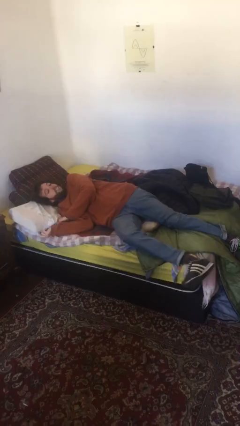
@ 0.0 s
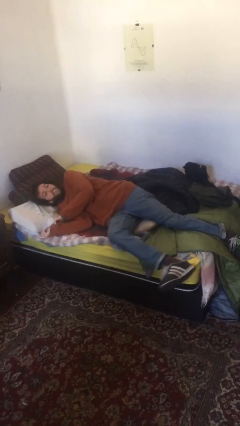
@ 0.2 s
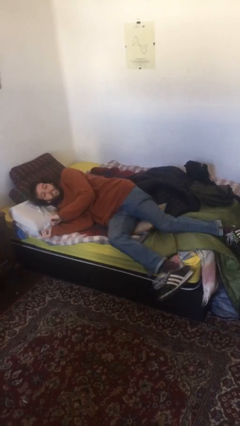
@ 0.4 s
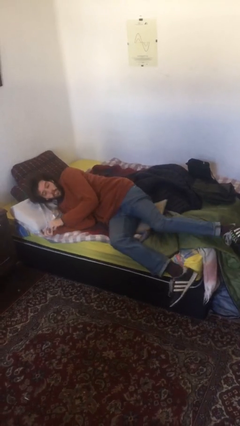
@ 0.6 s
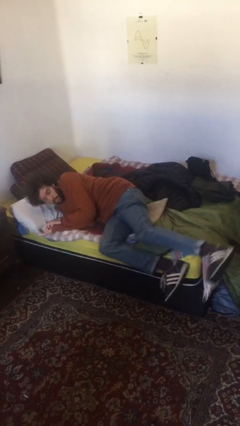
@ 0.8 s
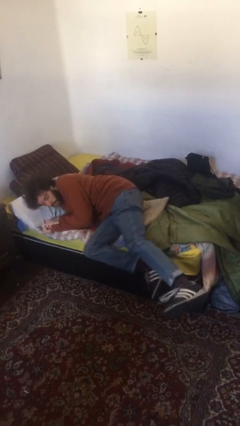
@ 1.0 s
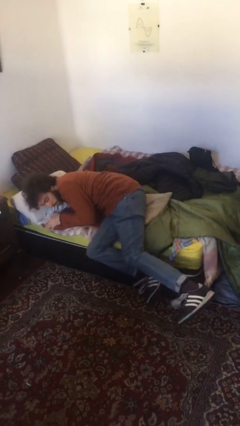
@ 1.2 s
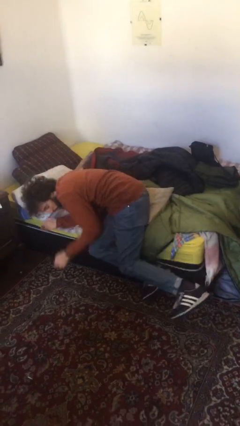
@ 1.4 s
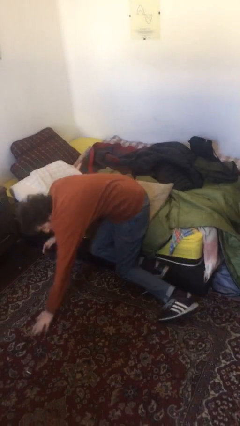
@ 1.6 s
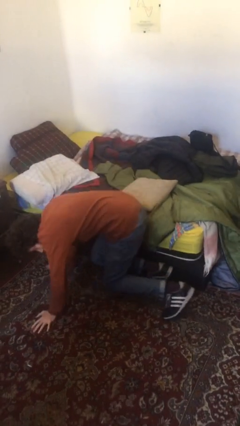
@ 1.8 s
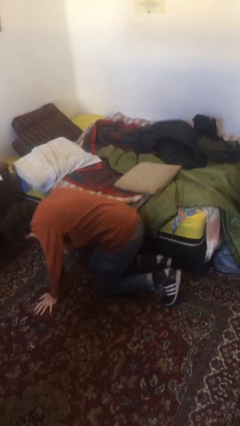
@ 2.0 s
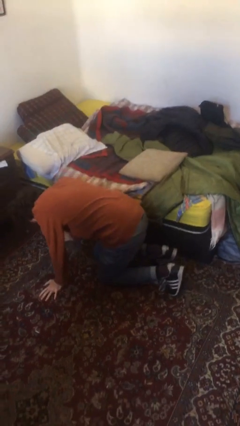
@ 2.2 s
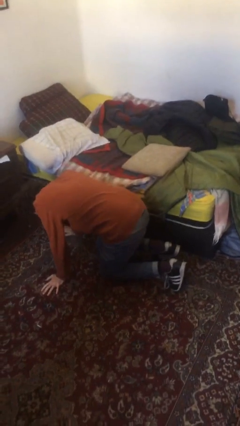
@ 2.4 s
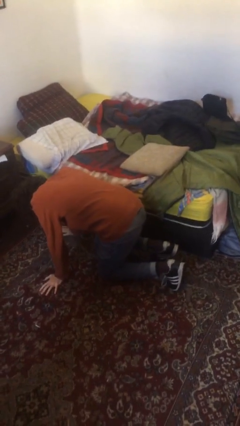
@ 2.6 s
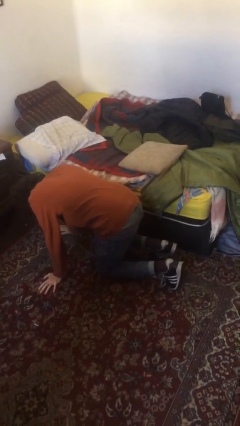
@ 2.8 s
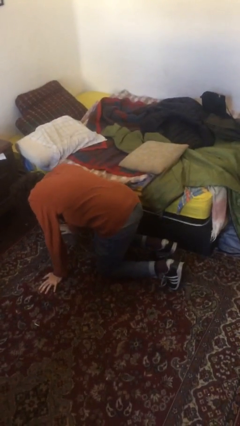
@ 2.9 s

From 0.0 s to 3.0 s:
person falls from bed

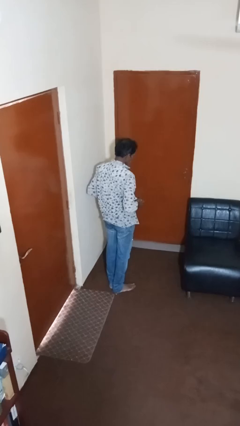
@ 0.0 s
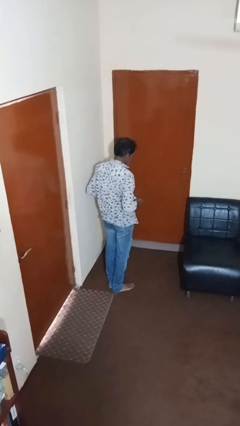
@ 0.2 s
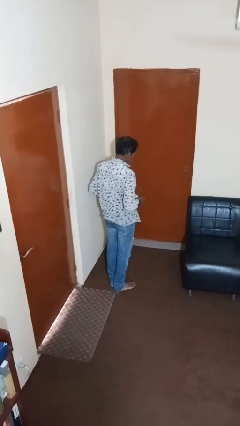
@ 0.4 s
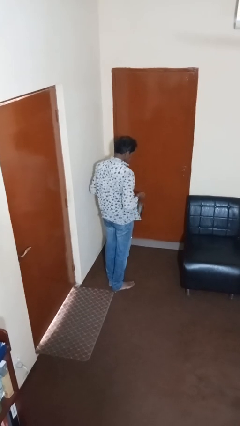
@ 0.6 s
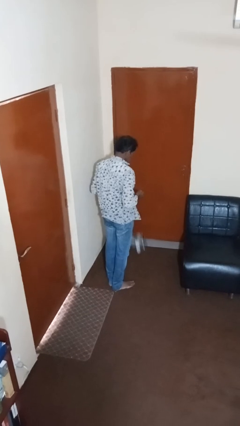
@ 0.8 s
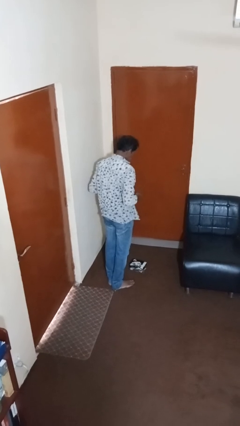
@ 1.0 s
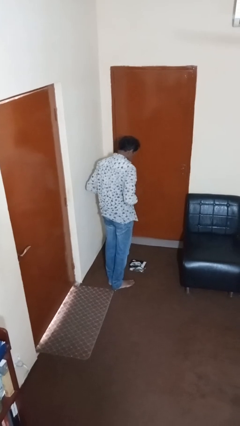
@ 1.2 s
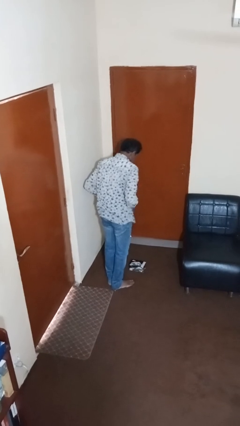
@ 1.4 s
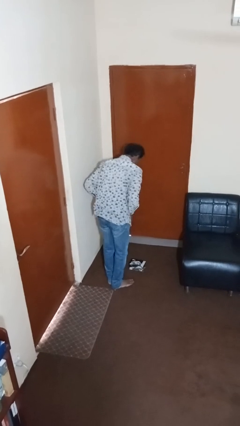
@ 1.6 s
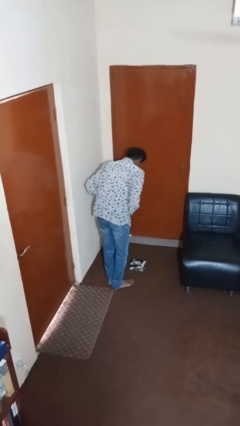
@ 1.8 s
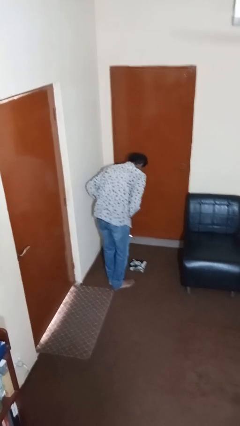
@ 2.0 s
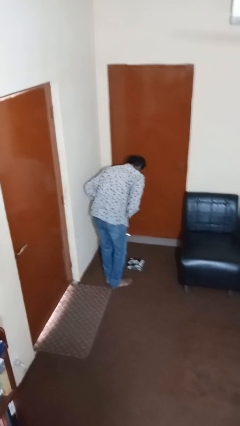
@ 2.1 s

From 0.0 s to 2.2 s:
person drops object

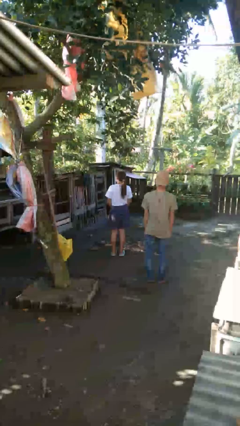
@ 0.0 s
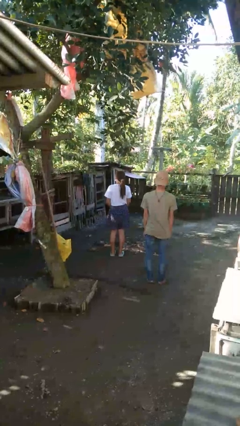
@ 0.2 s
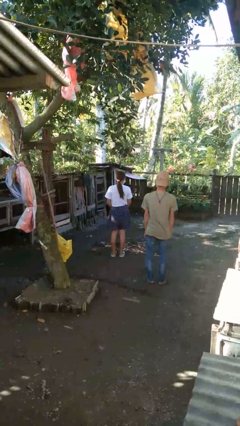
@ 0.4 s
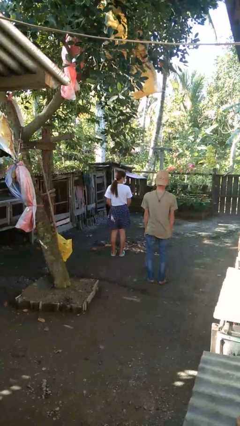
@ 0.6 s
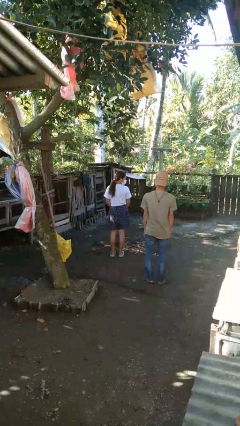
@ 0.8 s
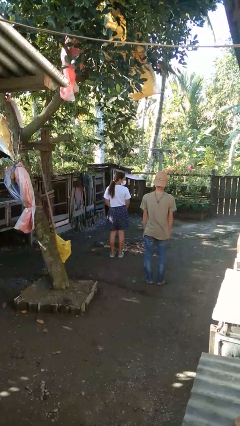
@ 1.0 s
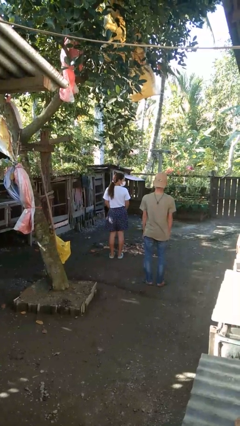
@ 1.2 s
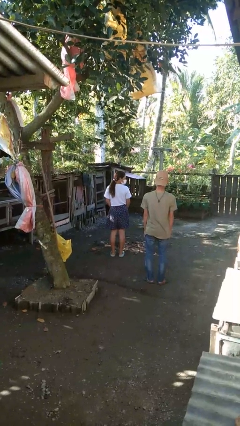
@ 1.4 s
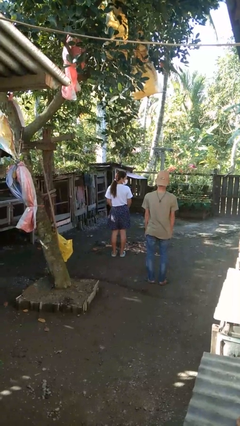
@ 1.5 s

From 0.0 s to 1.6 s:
person looks over shoulder

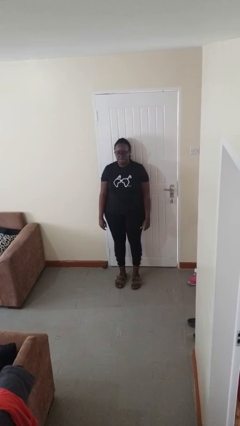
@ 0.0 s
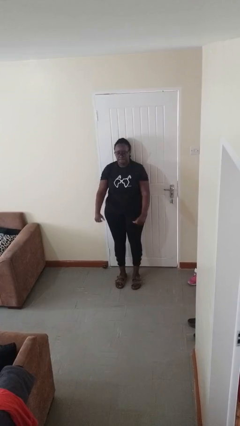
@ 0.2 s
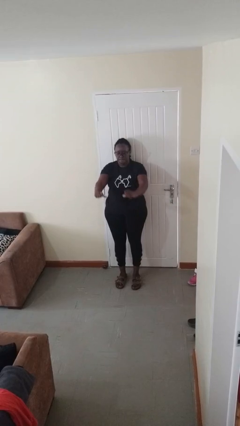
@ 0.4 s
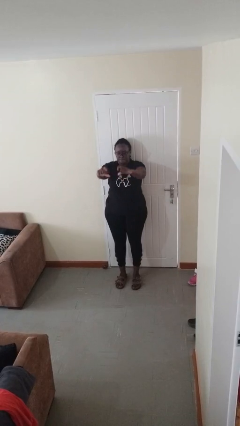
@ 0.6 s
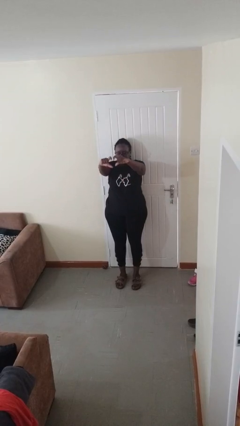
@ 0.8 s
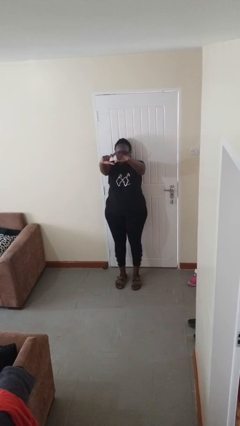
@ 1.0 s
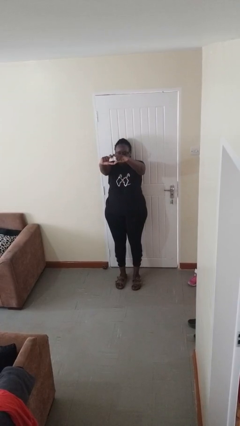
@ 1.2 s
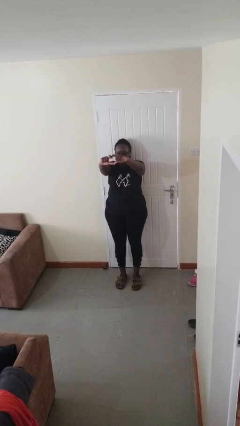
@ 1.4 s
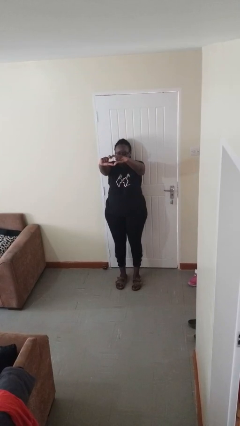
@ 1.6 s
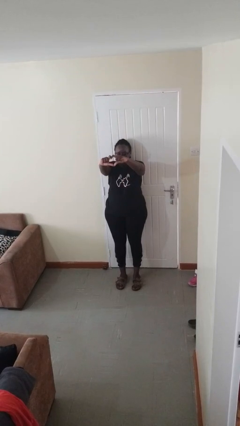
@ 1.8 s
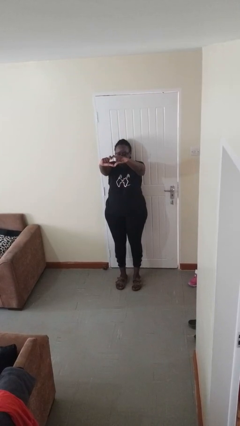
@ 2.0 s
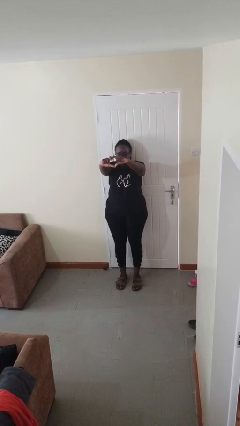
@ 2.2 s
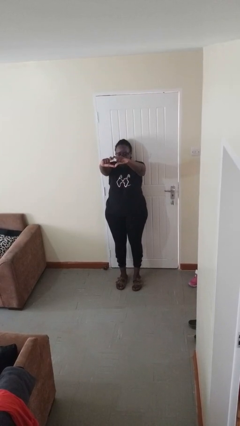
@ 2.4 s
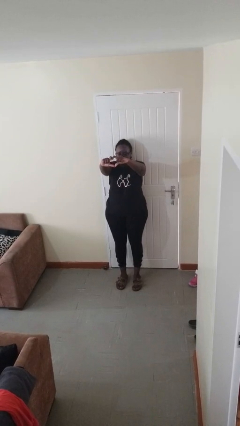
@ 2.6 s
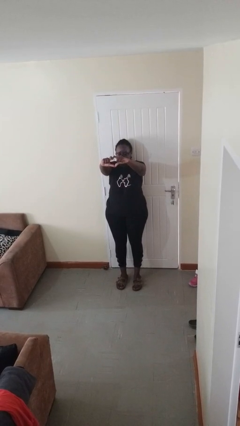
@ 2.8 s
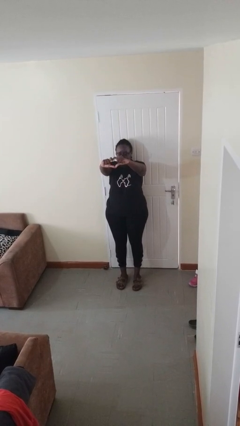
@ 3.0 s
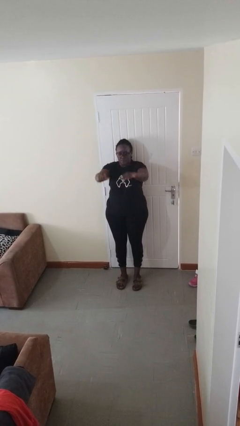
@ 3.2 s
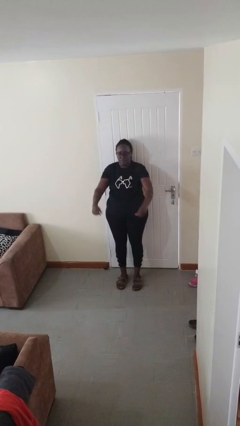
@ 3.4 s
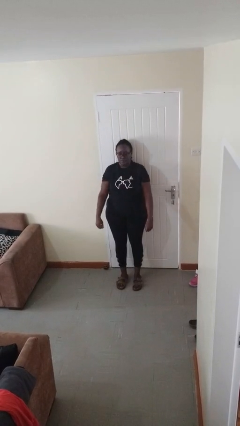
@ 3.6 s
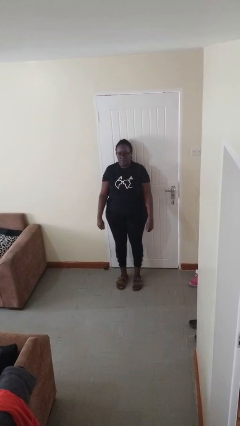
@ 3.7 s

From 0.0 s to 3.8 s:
person gestures heart

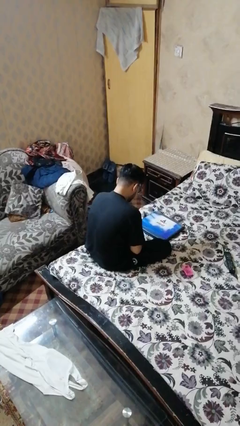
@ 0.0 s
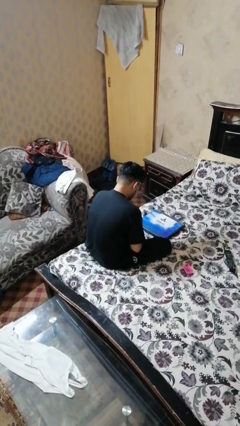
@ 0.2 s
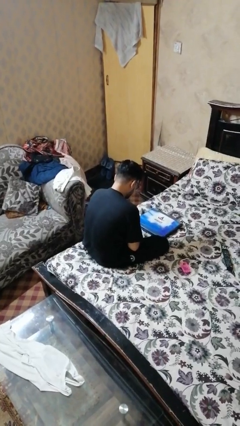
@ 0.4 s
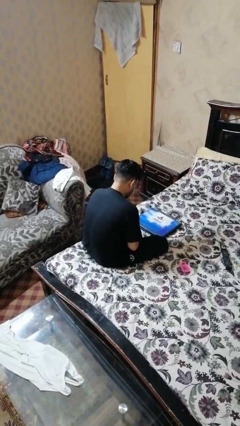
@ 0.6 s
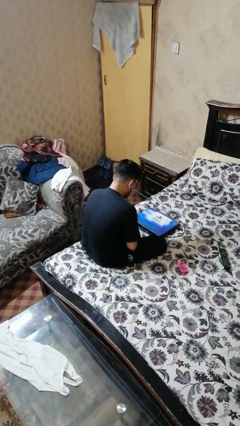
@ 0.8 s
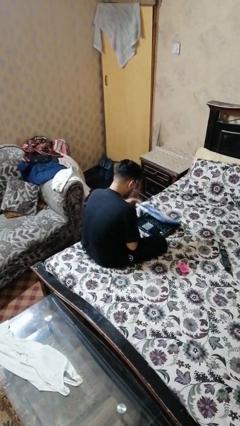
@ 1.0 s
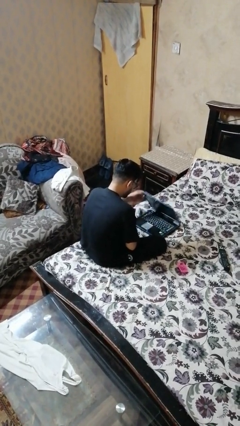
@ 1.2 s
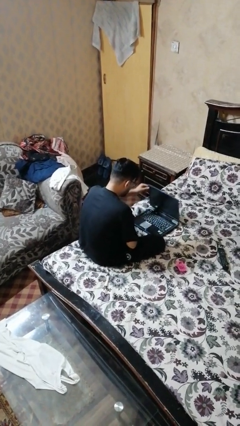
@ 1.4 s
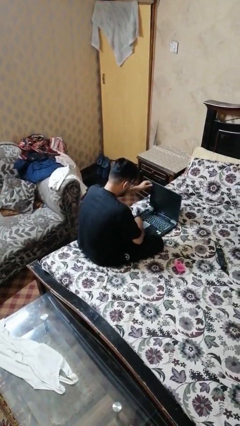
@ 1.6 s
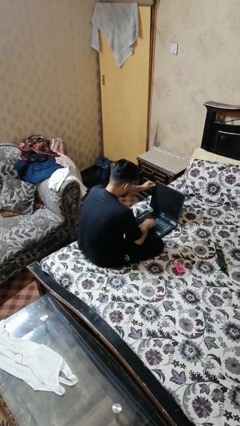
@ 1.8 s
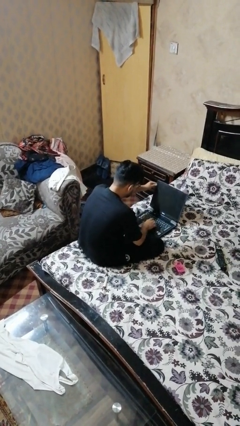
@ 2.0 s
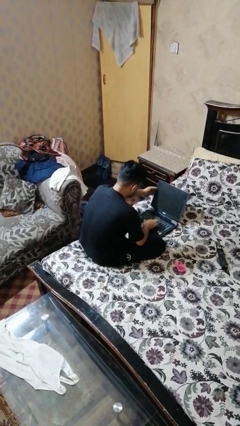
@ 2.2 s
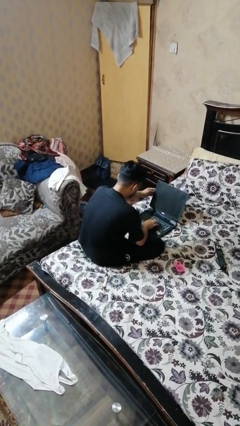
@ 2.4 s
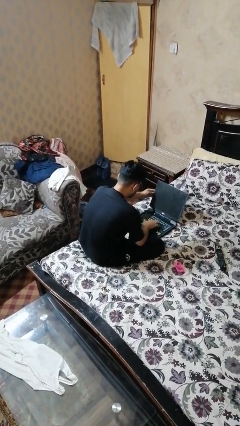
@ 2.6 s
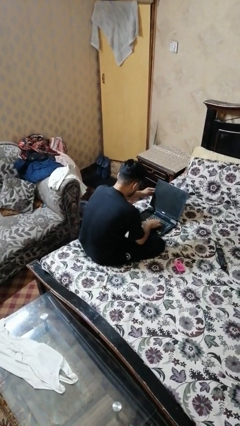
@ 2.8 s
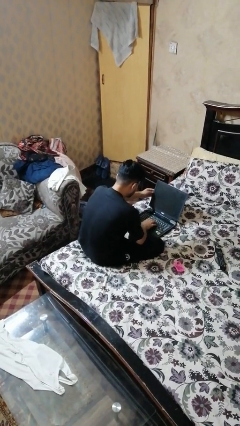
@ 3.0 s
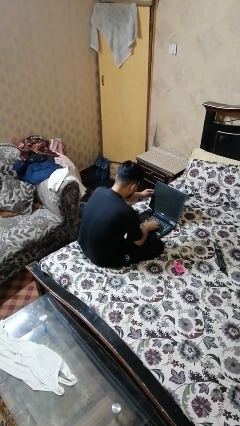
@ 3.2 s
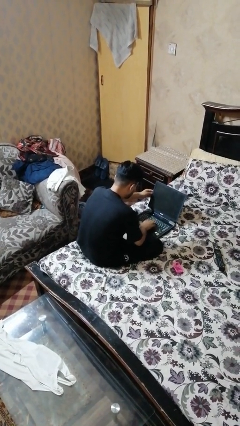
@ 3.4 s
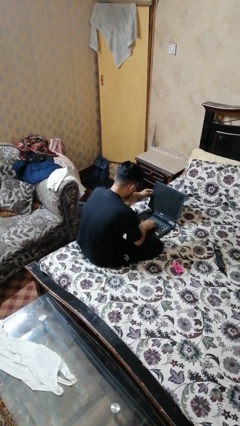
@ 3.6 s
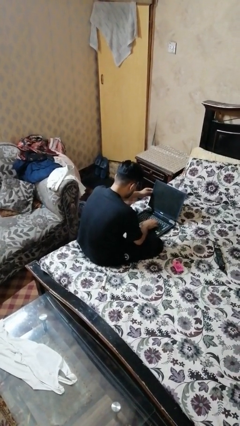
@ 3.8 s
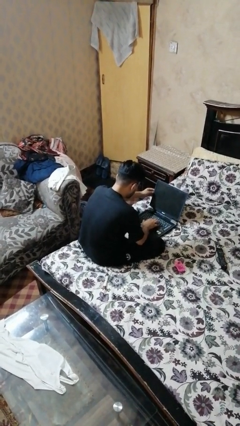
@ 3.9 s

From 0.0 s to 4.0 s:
person opens laptop

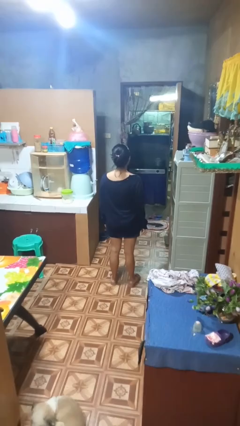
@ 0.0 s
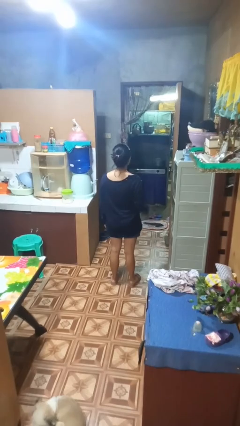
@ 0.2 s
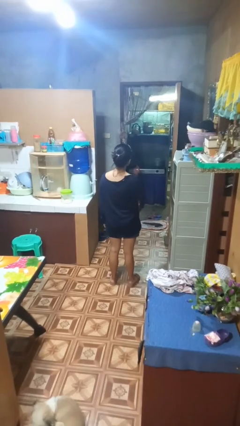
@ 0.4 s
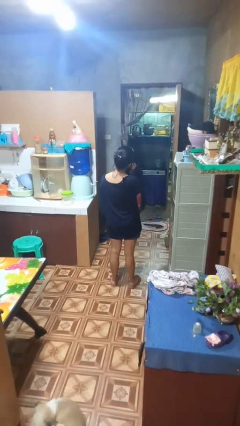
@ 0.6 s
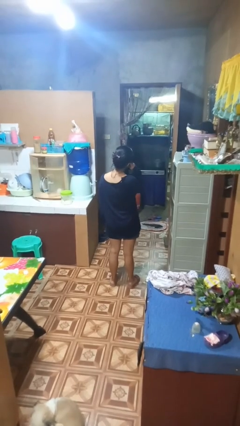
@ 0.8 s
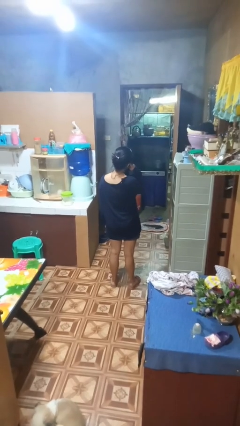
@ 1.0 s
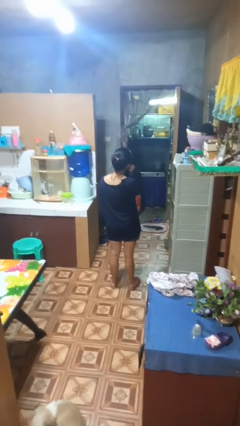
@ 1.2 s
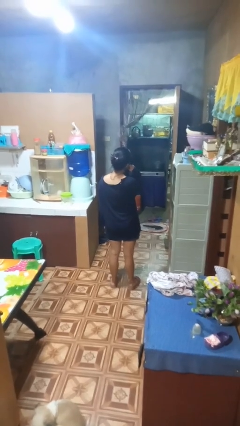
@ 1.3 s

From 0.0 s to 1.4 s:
person gestures call me

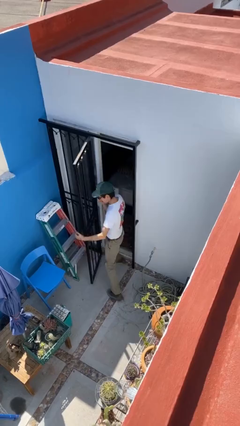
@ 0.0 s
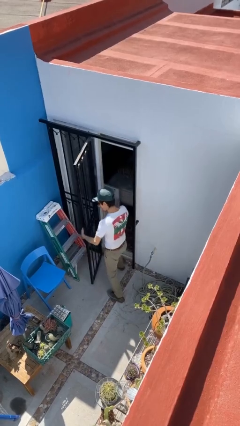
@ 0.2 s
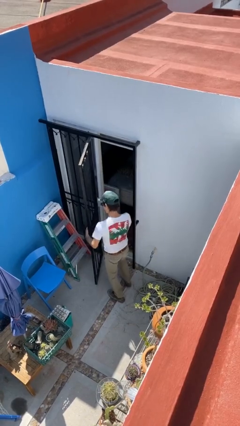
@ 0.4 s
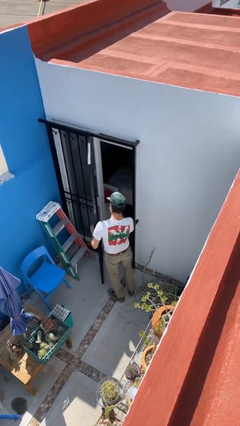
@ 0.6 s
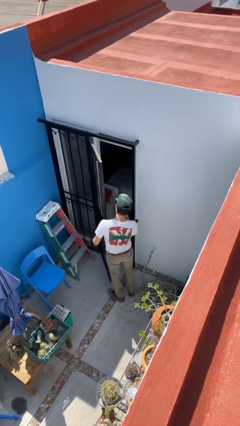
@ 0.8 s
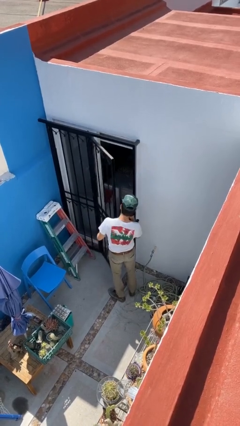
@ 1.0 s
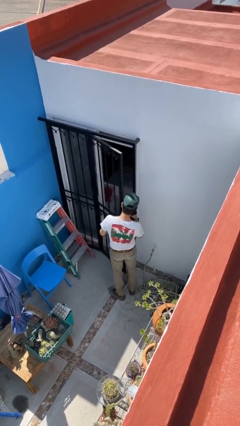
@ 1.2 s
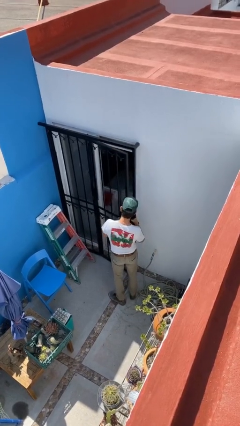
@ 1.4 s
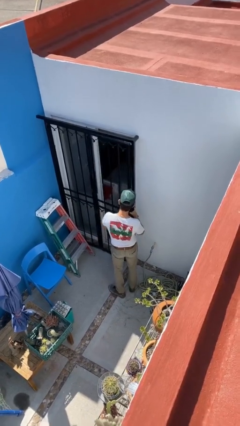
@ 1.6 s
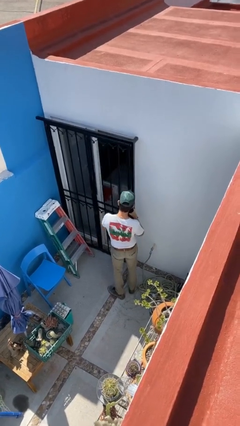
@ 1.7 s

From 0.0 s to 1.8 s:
person enters scene through structure
